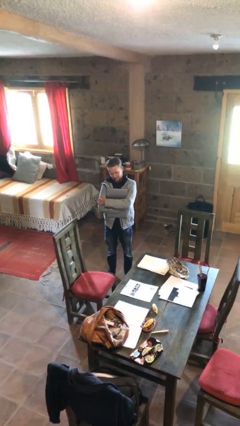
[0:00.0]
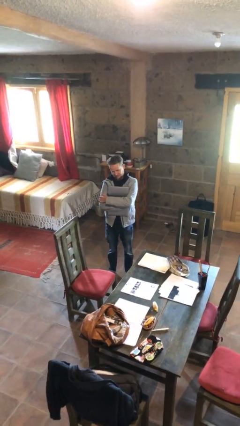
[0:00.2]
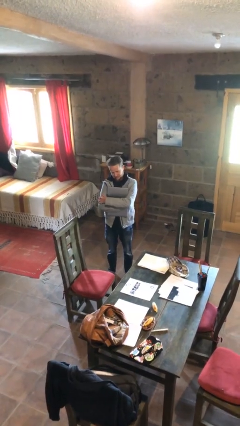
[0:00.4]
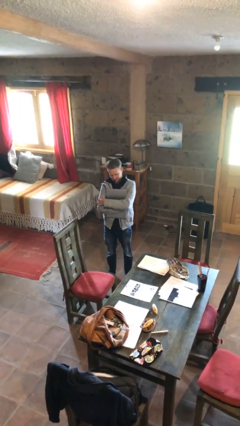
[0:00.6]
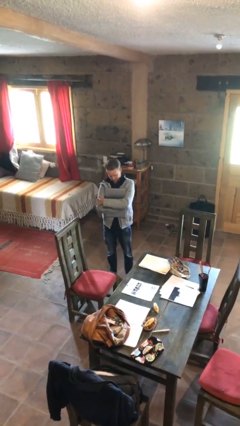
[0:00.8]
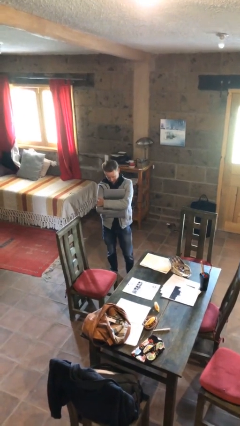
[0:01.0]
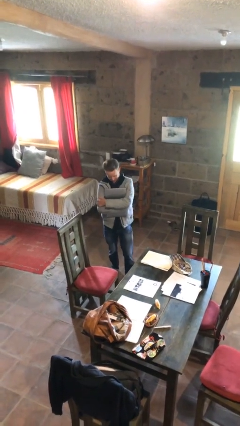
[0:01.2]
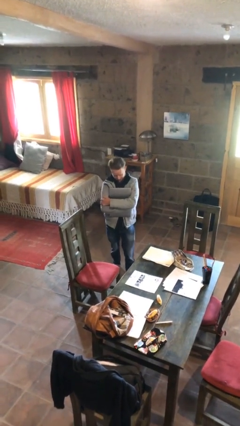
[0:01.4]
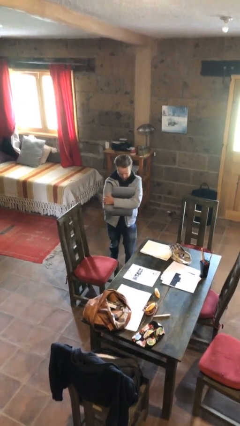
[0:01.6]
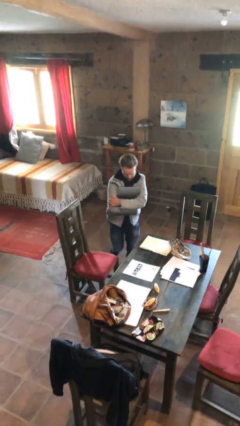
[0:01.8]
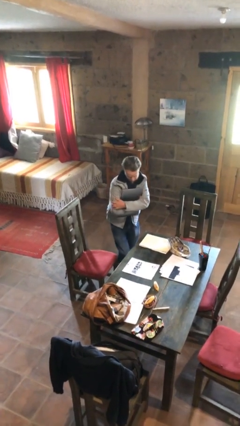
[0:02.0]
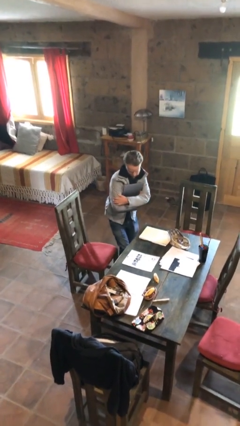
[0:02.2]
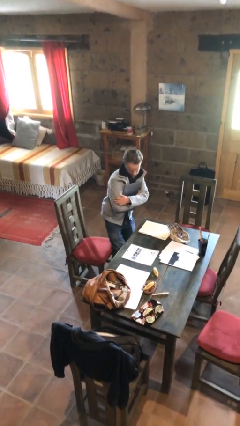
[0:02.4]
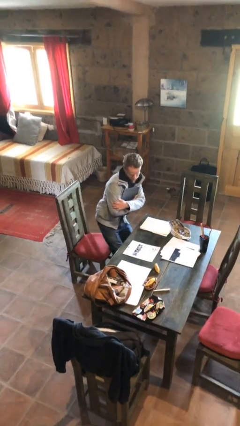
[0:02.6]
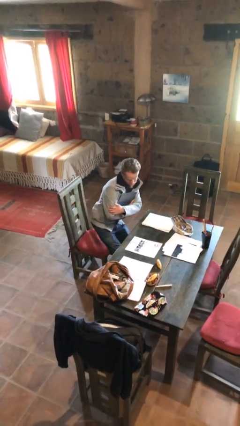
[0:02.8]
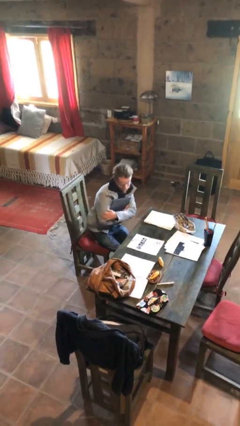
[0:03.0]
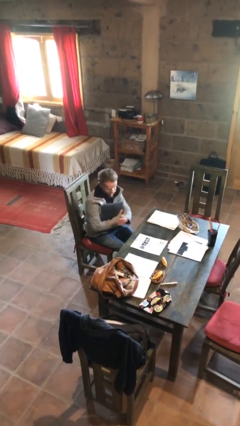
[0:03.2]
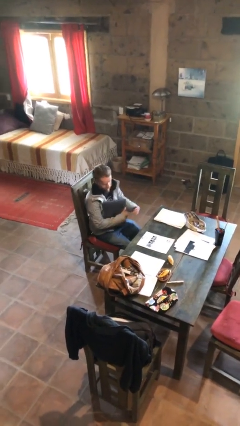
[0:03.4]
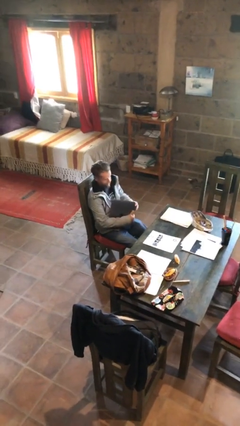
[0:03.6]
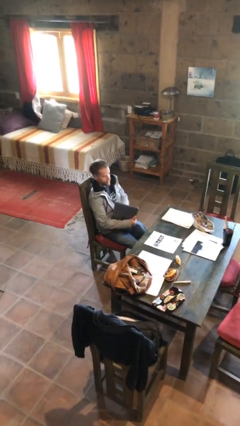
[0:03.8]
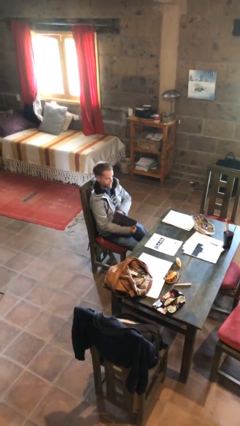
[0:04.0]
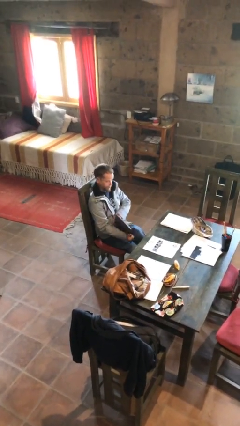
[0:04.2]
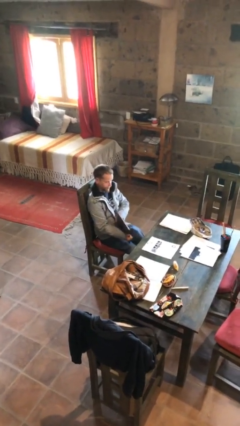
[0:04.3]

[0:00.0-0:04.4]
person sits down

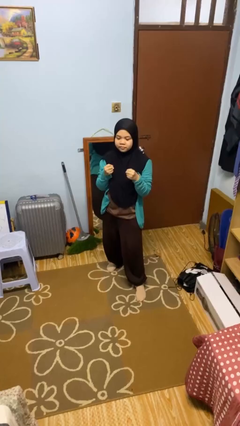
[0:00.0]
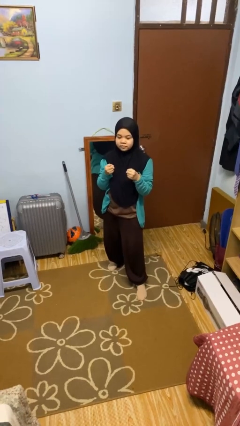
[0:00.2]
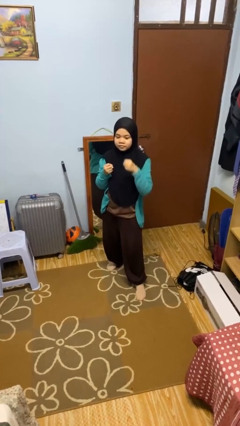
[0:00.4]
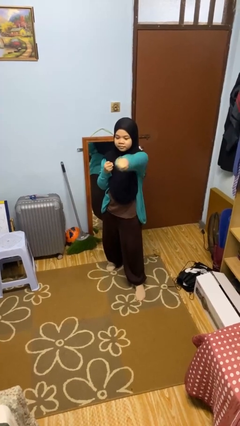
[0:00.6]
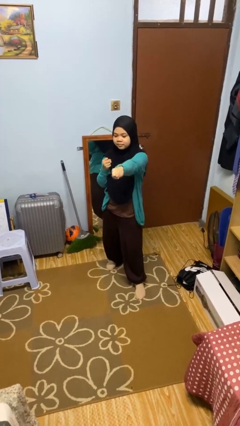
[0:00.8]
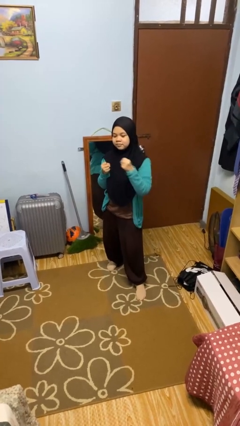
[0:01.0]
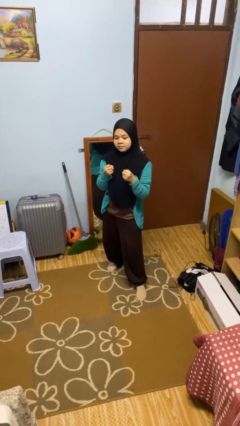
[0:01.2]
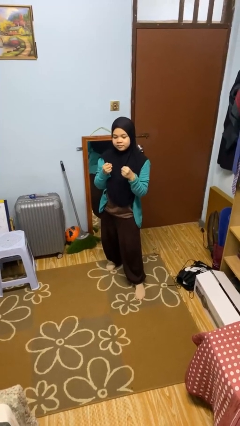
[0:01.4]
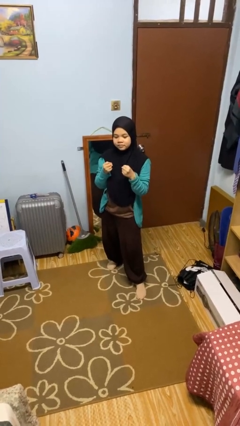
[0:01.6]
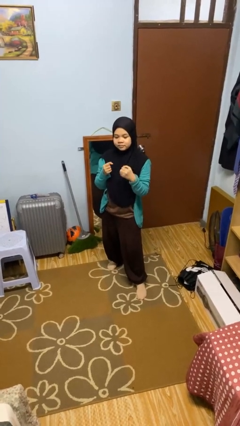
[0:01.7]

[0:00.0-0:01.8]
person punches

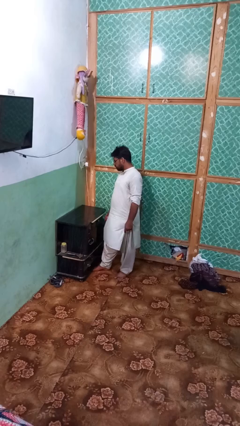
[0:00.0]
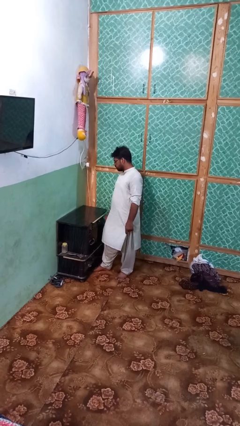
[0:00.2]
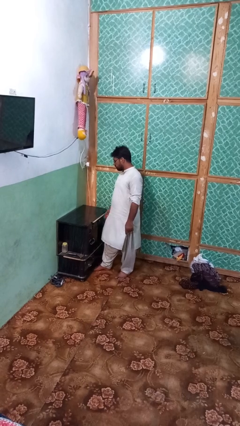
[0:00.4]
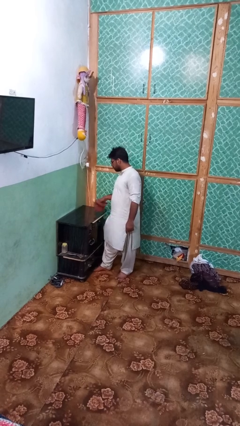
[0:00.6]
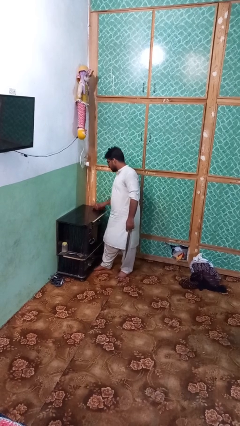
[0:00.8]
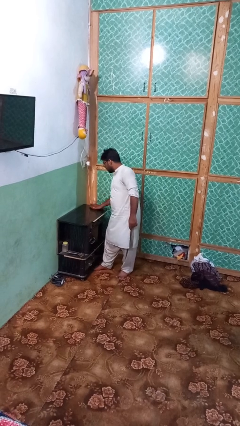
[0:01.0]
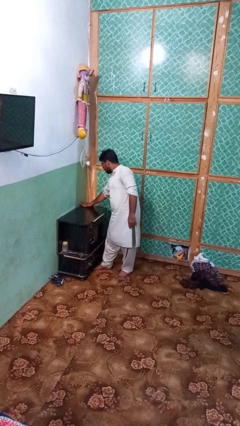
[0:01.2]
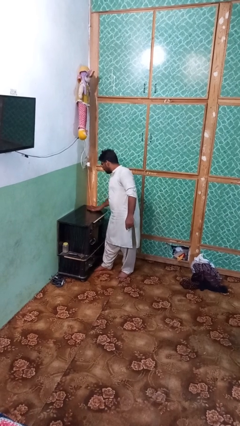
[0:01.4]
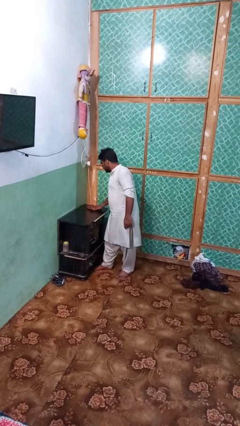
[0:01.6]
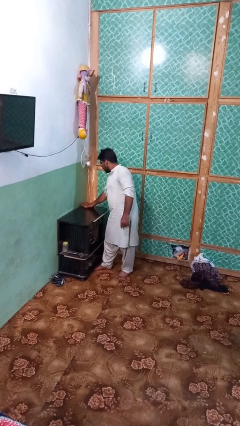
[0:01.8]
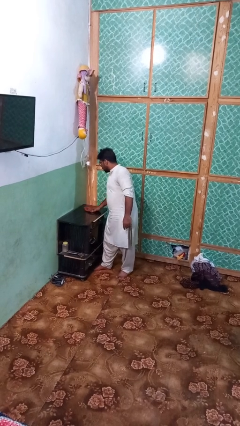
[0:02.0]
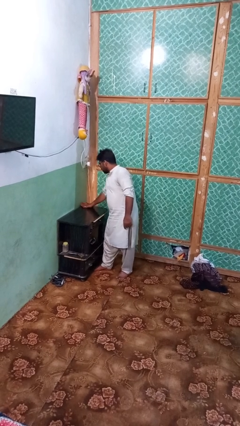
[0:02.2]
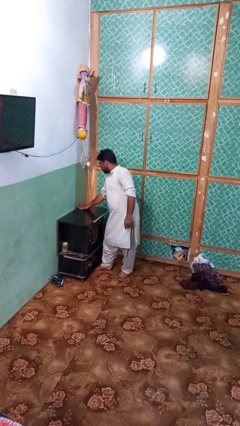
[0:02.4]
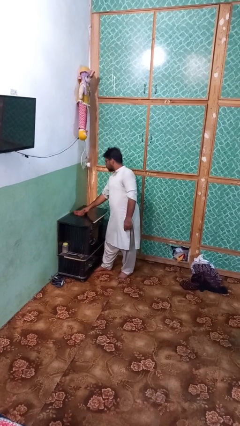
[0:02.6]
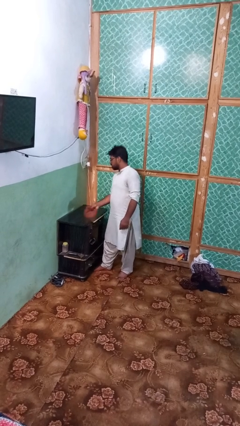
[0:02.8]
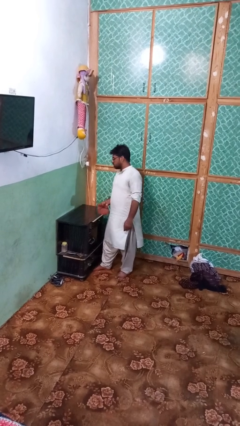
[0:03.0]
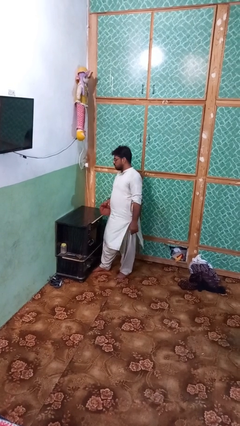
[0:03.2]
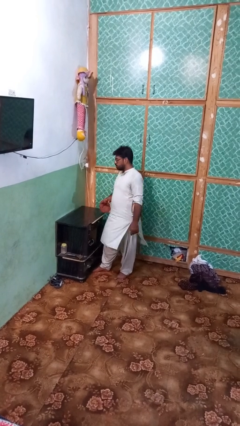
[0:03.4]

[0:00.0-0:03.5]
person cleans table with rag

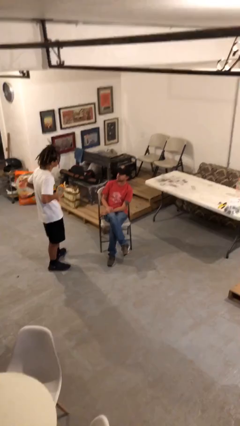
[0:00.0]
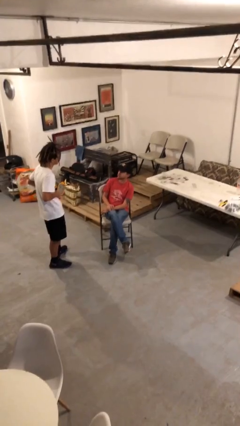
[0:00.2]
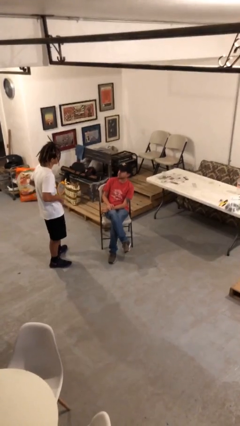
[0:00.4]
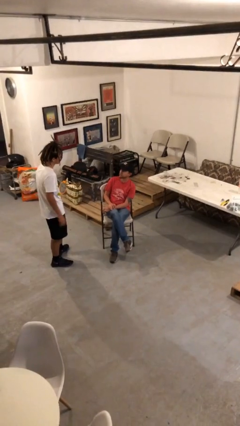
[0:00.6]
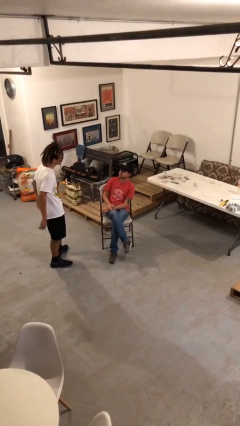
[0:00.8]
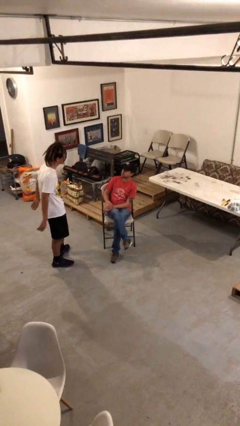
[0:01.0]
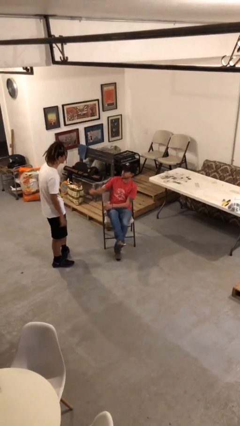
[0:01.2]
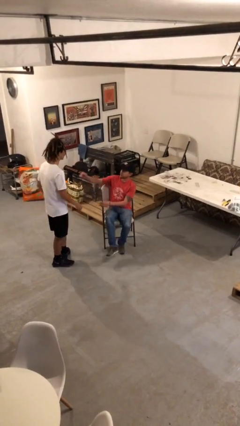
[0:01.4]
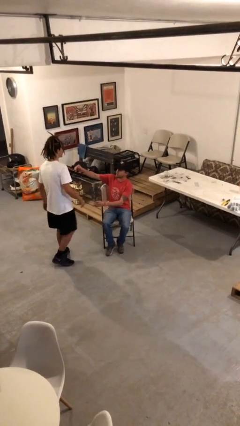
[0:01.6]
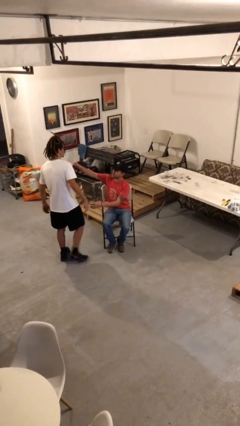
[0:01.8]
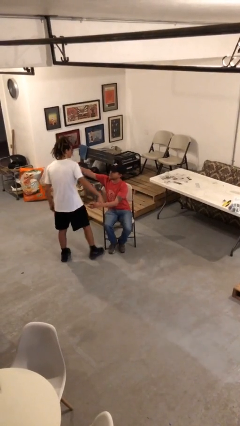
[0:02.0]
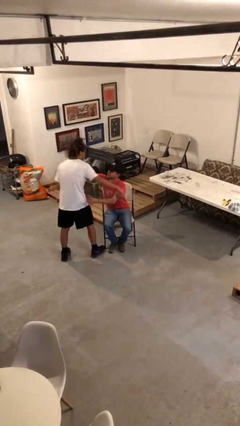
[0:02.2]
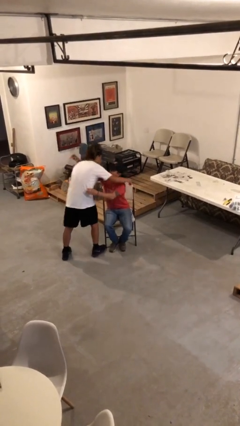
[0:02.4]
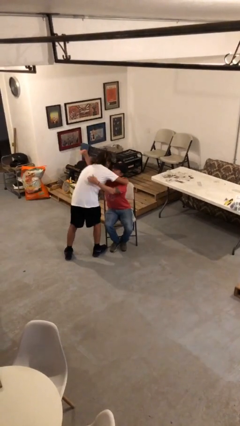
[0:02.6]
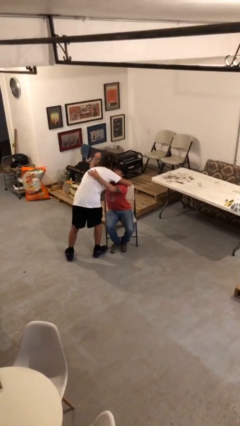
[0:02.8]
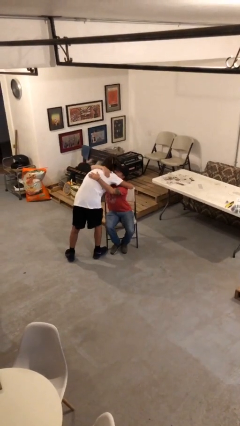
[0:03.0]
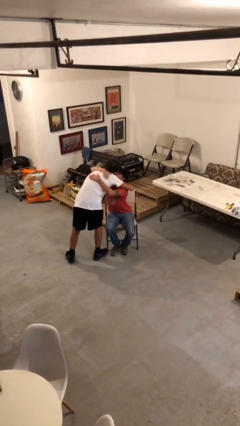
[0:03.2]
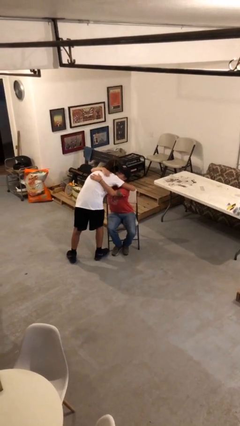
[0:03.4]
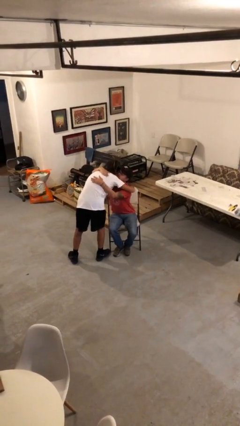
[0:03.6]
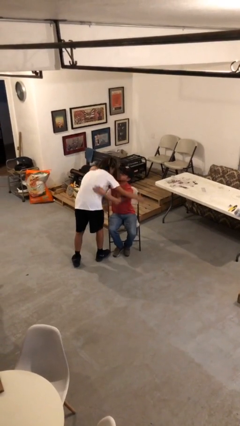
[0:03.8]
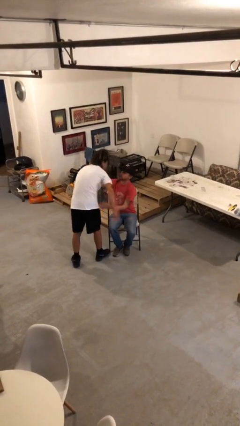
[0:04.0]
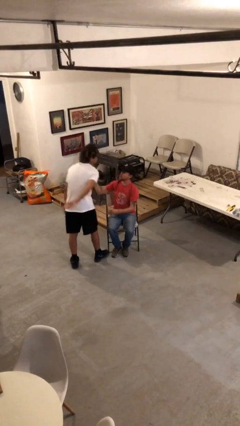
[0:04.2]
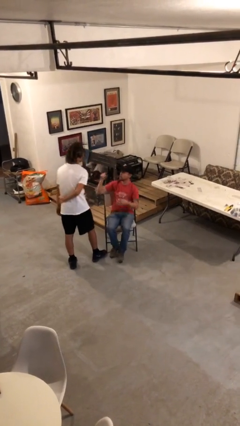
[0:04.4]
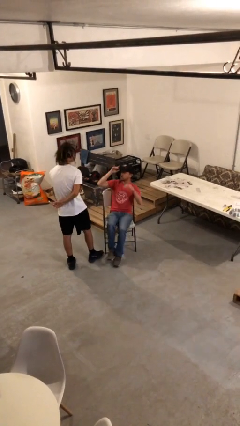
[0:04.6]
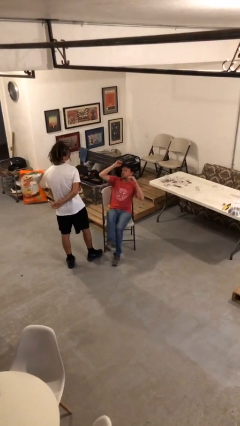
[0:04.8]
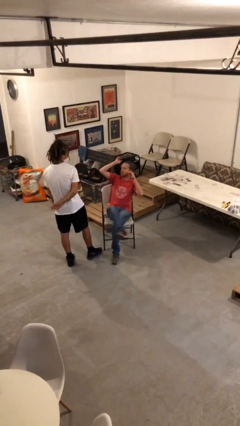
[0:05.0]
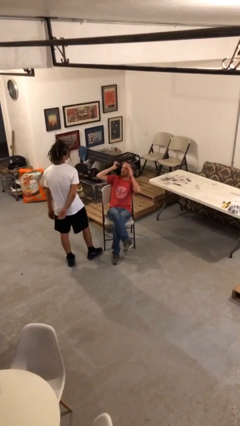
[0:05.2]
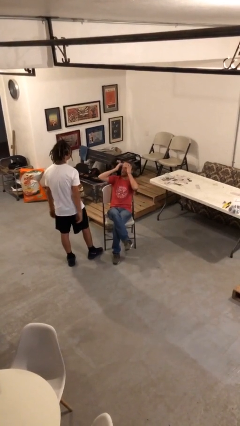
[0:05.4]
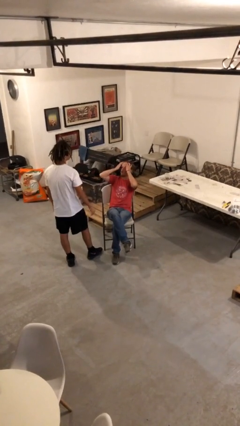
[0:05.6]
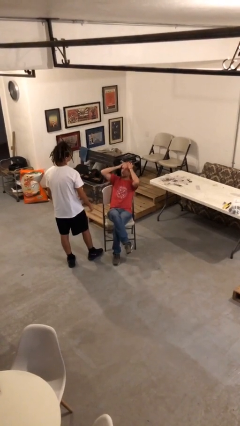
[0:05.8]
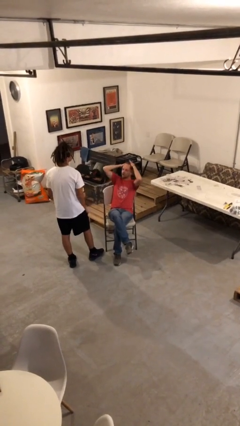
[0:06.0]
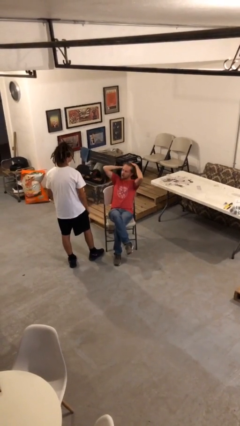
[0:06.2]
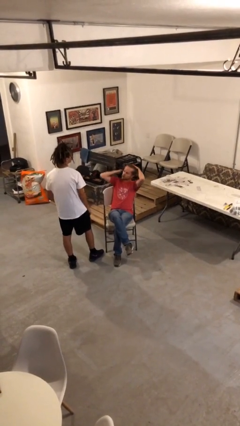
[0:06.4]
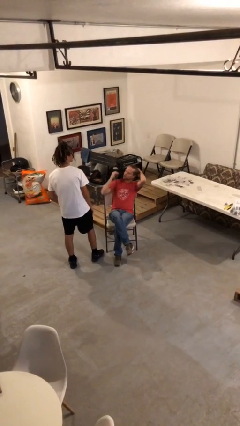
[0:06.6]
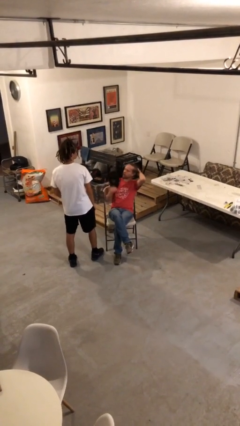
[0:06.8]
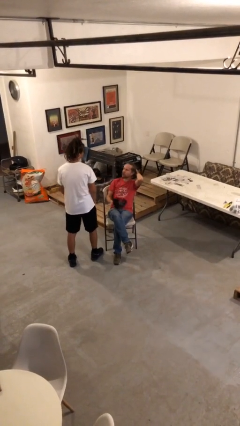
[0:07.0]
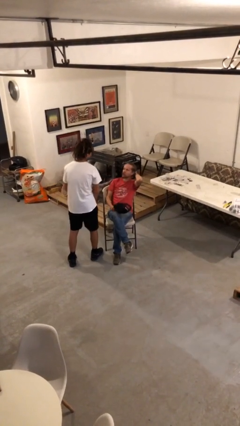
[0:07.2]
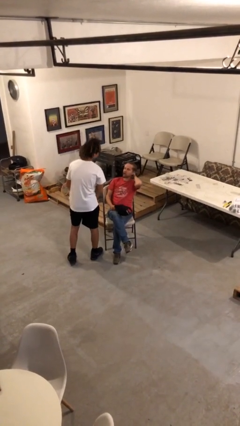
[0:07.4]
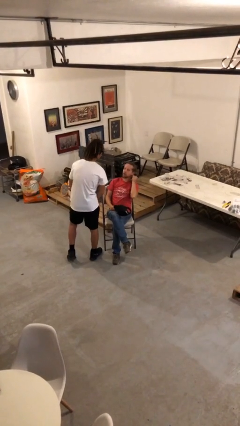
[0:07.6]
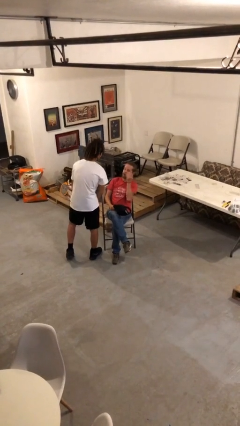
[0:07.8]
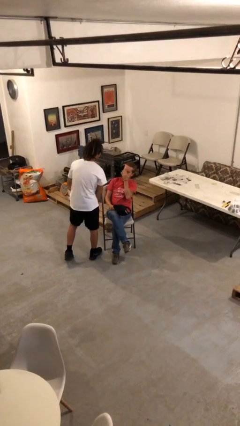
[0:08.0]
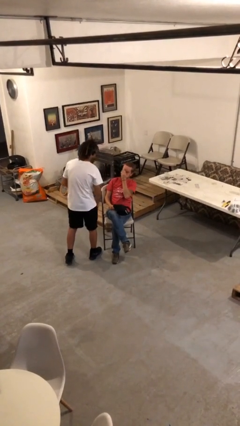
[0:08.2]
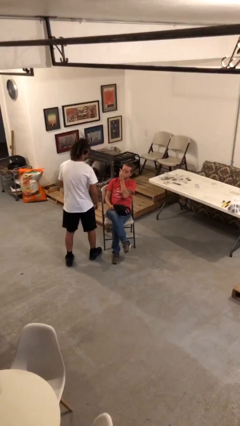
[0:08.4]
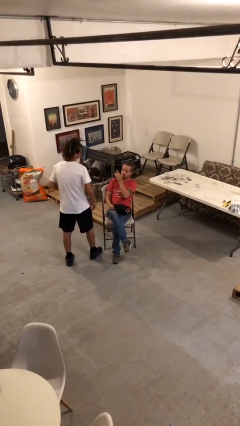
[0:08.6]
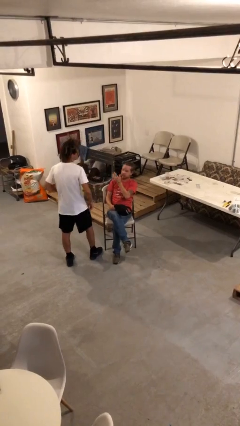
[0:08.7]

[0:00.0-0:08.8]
person embraces person
